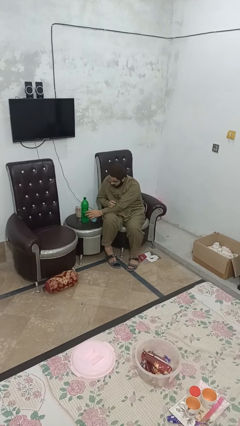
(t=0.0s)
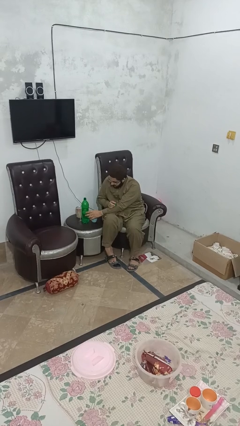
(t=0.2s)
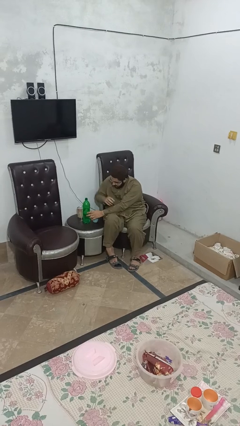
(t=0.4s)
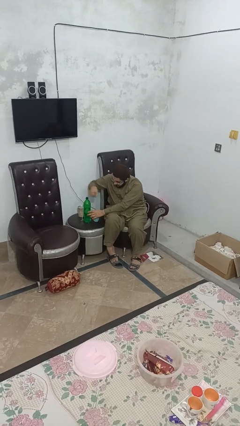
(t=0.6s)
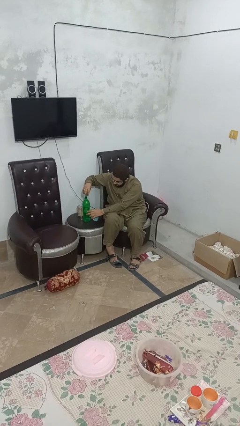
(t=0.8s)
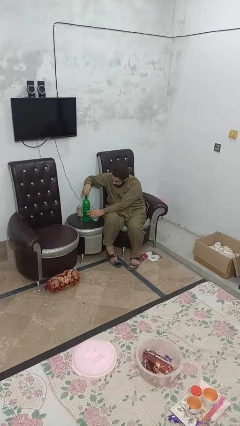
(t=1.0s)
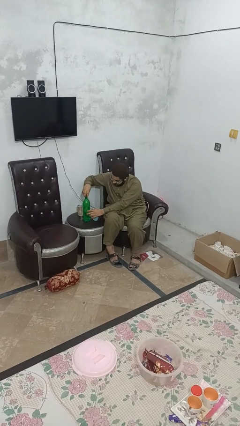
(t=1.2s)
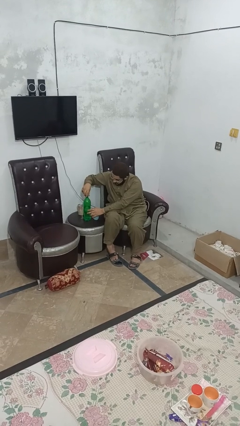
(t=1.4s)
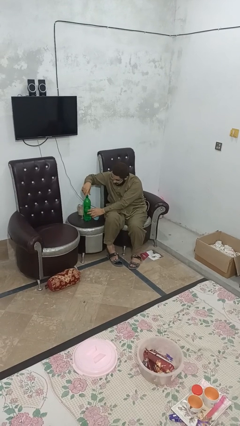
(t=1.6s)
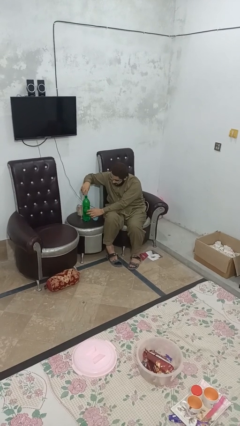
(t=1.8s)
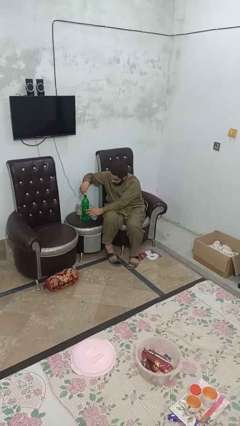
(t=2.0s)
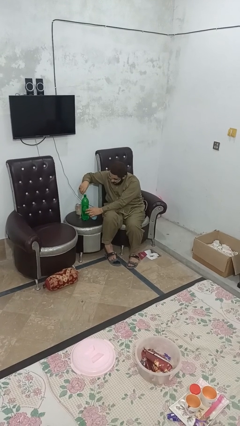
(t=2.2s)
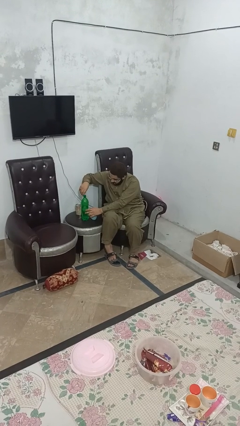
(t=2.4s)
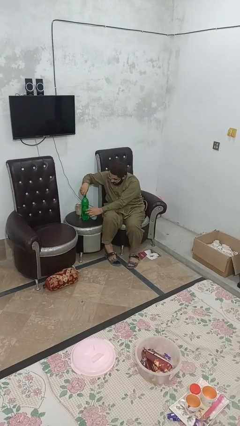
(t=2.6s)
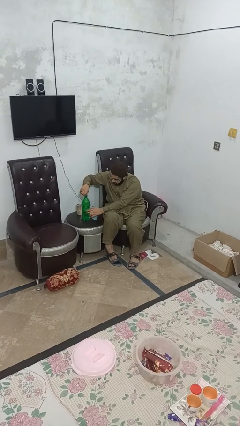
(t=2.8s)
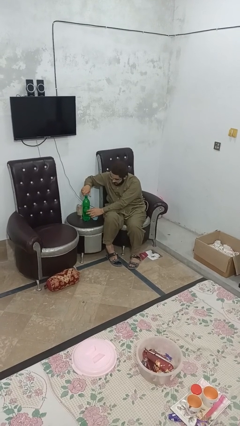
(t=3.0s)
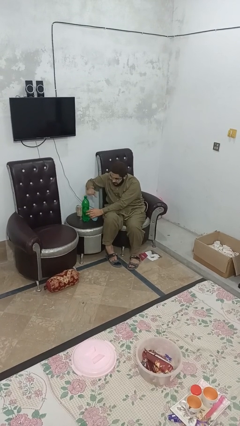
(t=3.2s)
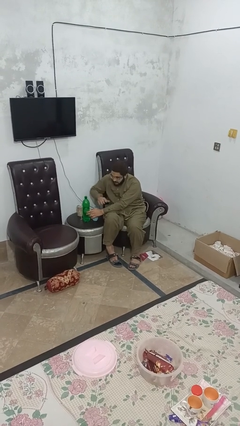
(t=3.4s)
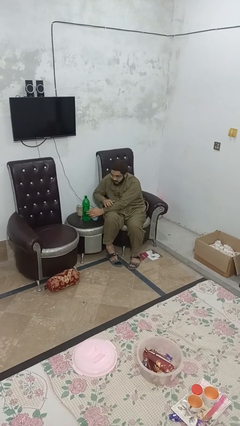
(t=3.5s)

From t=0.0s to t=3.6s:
person screws lid to bottle

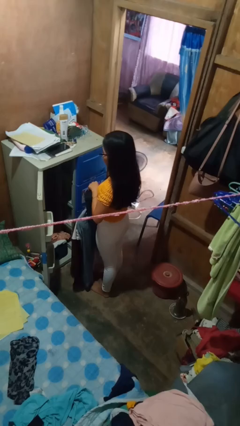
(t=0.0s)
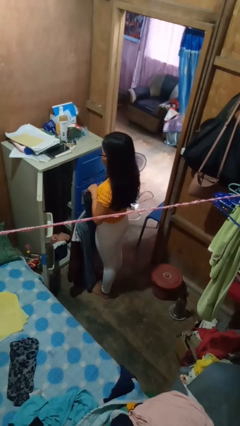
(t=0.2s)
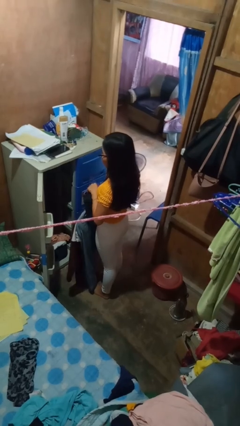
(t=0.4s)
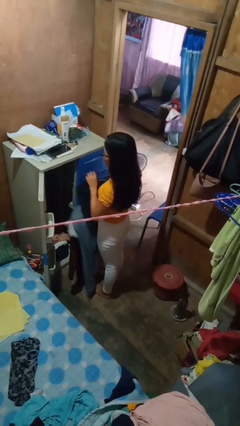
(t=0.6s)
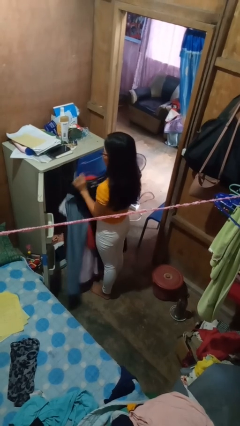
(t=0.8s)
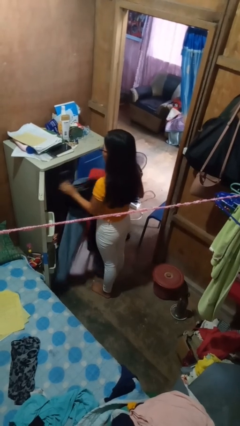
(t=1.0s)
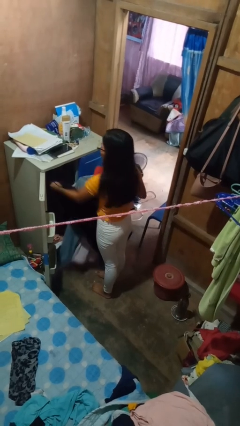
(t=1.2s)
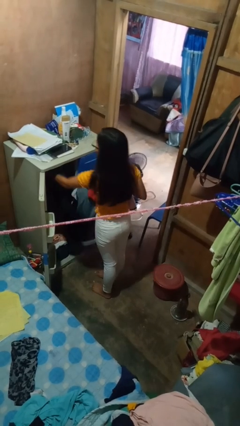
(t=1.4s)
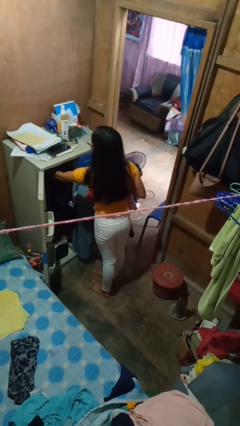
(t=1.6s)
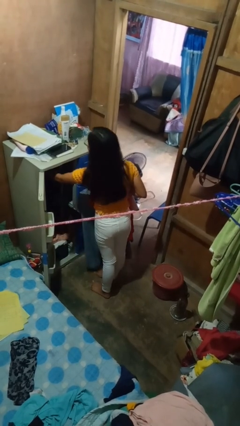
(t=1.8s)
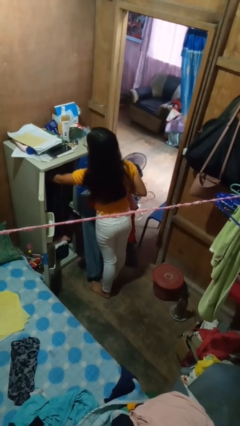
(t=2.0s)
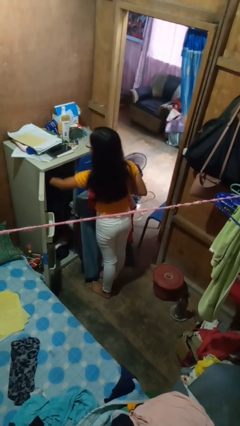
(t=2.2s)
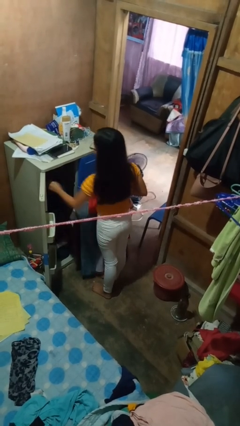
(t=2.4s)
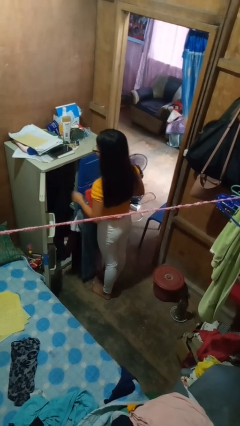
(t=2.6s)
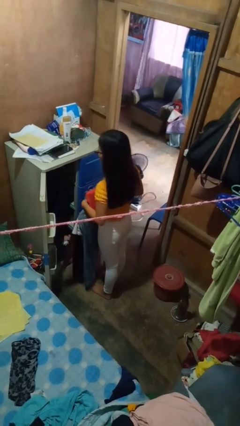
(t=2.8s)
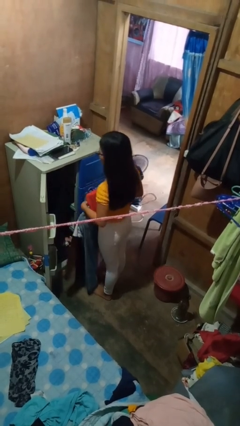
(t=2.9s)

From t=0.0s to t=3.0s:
person puts clothes into closet

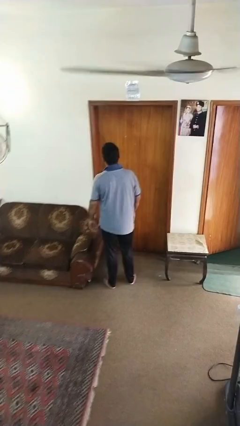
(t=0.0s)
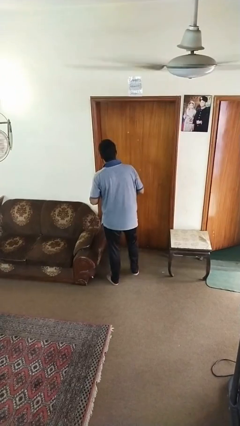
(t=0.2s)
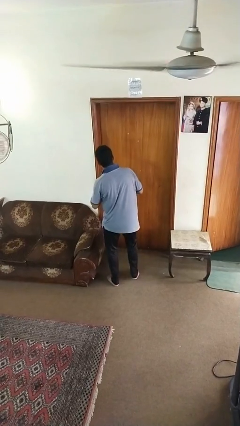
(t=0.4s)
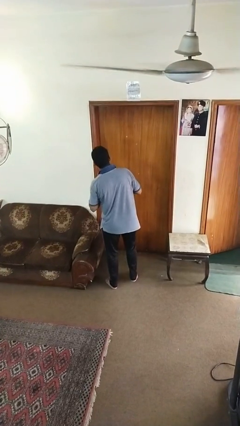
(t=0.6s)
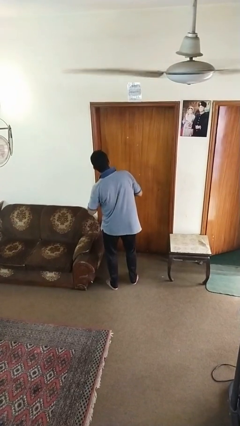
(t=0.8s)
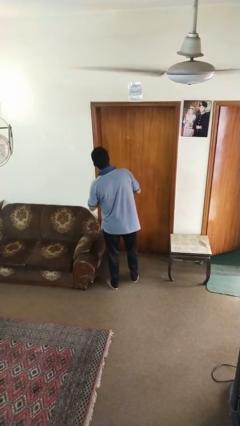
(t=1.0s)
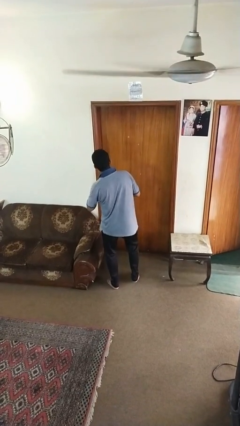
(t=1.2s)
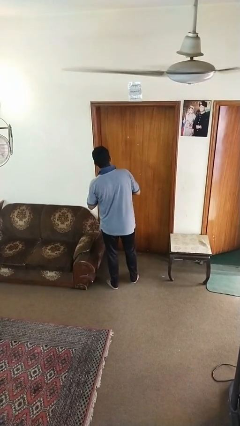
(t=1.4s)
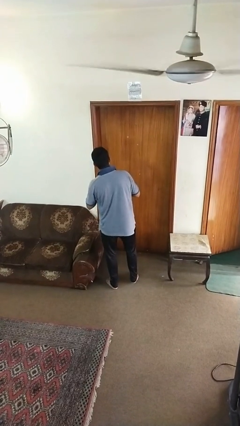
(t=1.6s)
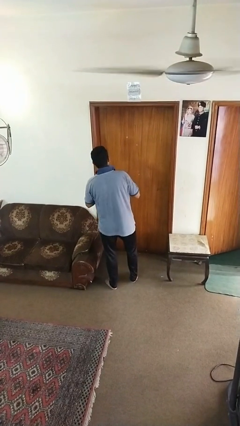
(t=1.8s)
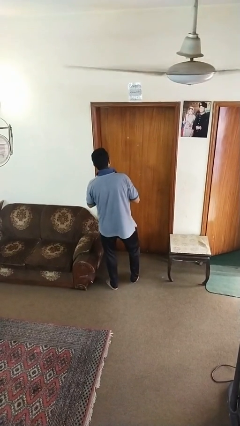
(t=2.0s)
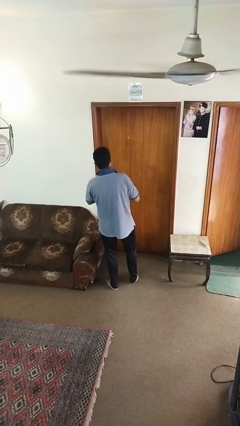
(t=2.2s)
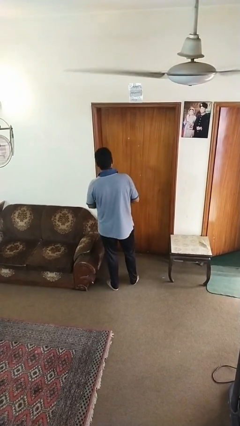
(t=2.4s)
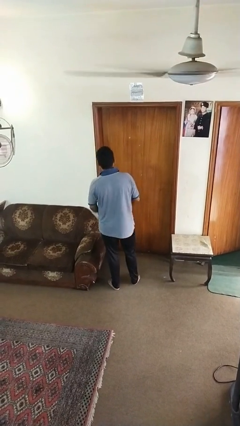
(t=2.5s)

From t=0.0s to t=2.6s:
person dances in place

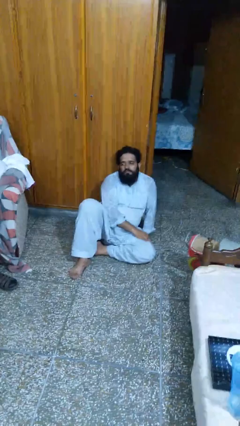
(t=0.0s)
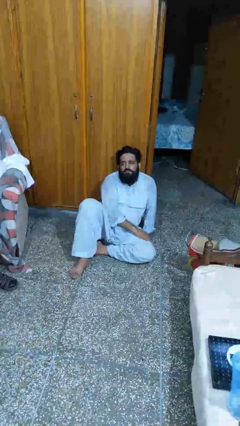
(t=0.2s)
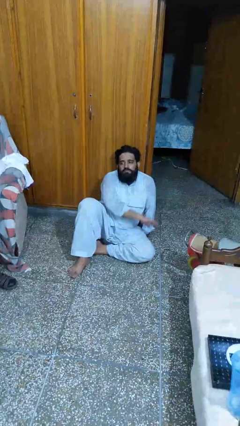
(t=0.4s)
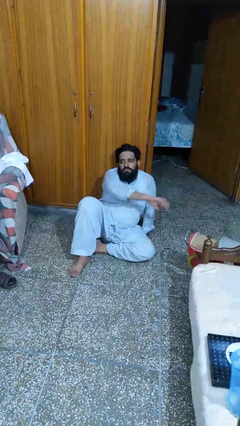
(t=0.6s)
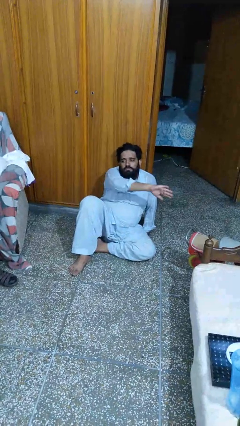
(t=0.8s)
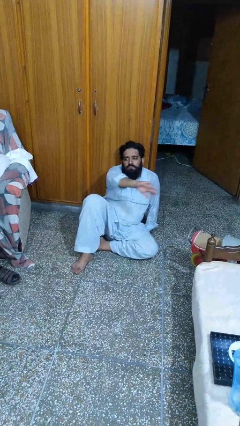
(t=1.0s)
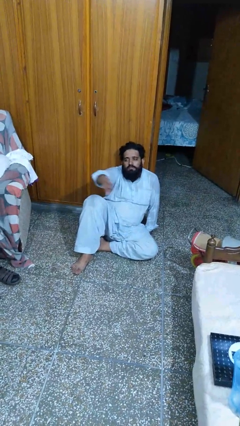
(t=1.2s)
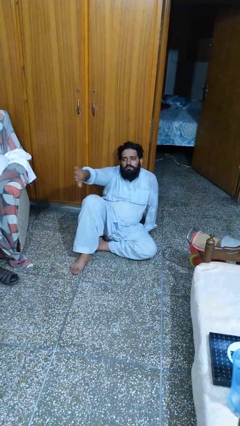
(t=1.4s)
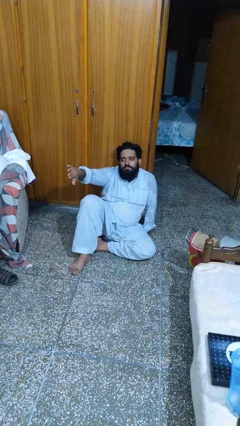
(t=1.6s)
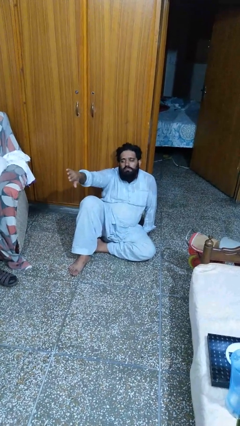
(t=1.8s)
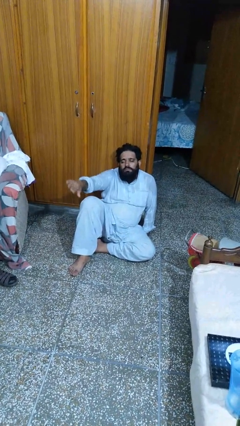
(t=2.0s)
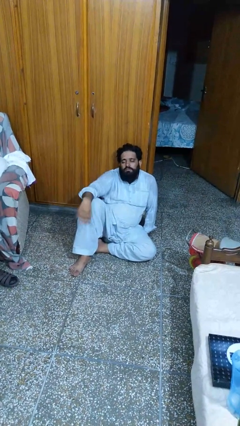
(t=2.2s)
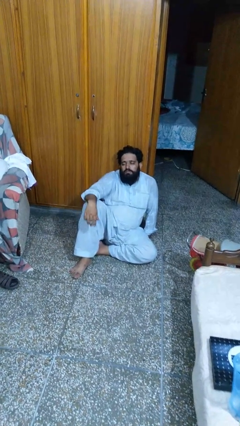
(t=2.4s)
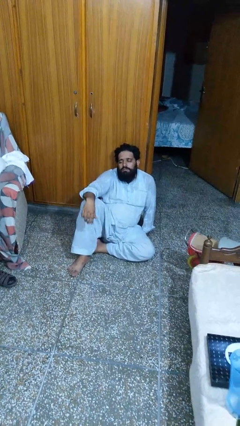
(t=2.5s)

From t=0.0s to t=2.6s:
person gestures swipe right

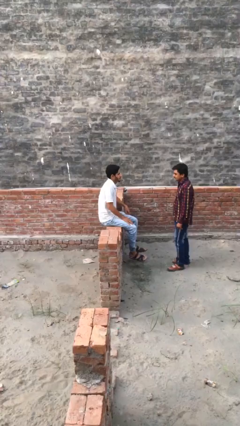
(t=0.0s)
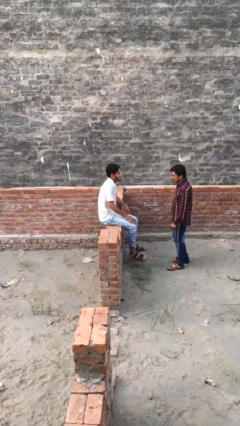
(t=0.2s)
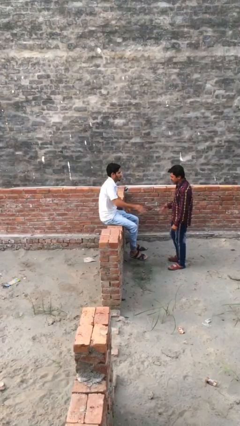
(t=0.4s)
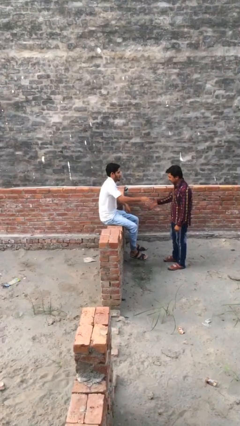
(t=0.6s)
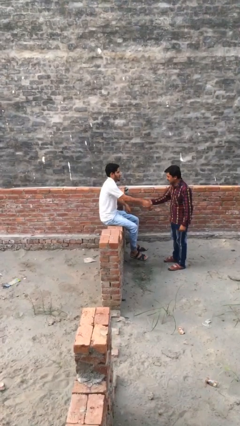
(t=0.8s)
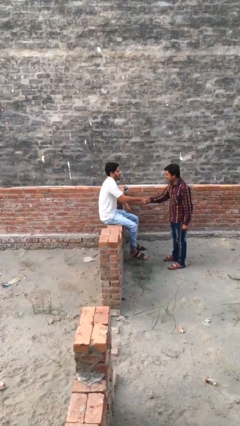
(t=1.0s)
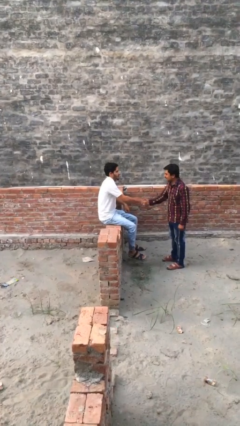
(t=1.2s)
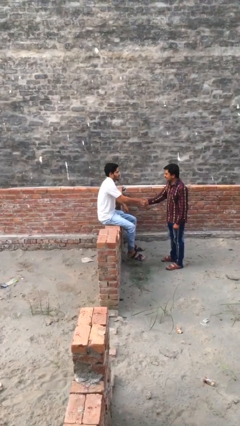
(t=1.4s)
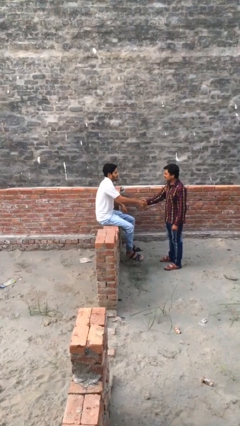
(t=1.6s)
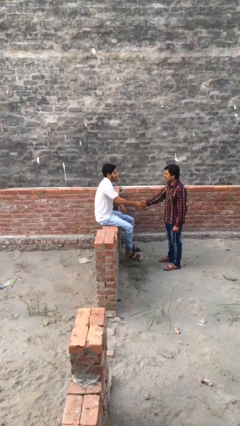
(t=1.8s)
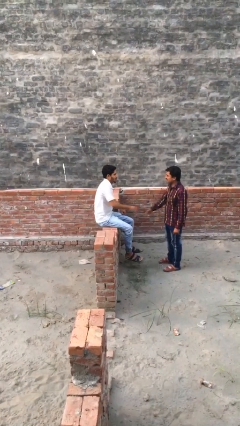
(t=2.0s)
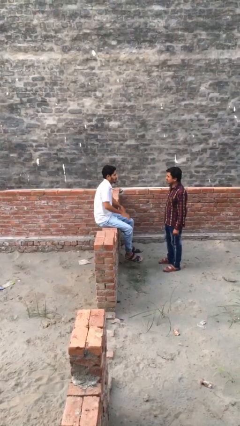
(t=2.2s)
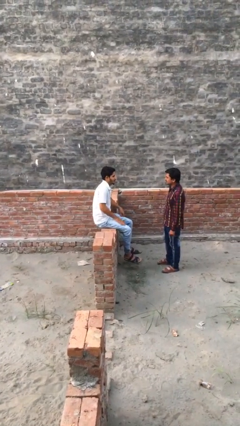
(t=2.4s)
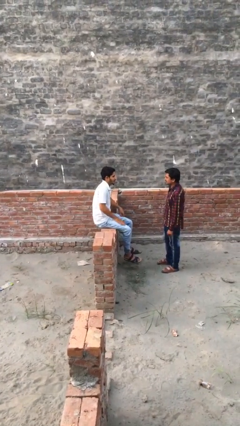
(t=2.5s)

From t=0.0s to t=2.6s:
person shakes hand

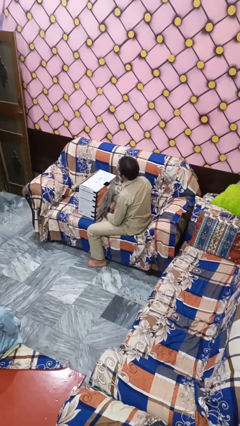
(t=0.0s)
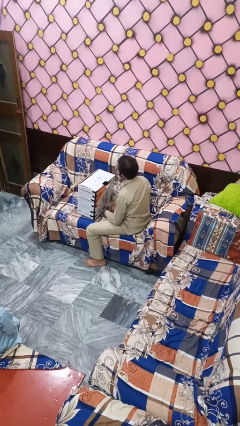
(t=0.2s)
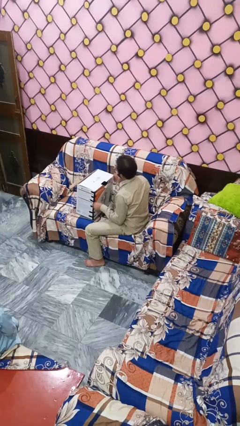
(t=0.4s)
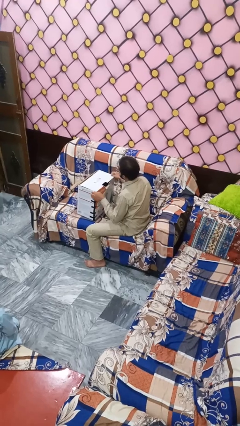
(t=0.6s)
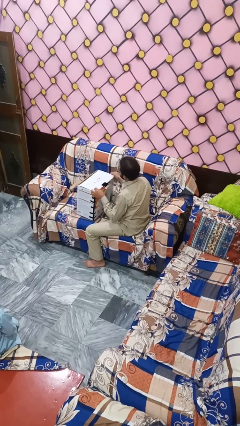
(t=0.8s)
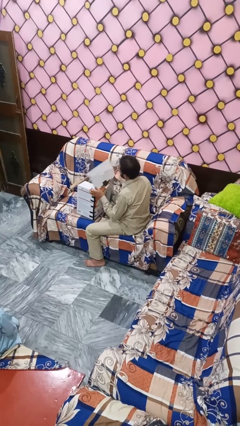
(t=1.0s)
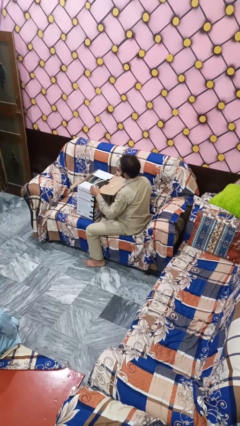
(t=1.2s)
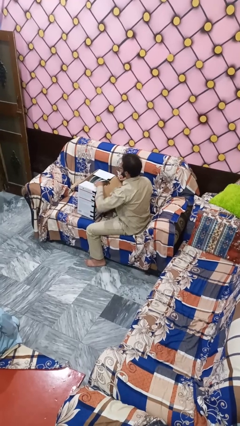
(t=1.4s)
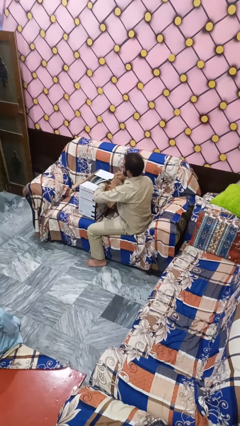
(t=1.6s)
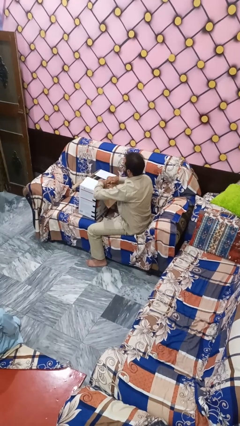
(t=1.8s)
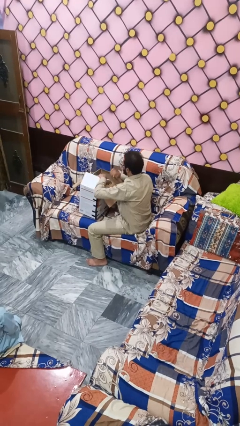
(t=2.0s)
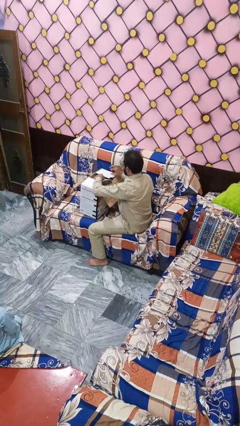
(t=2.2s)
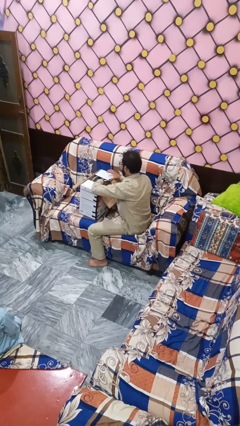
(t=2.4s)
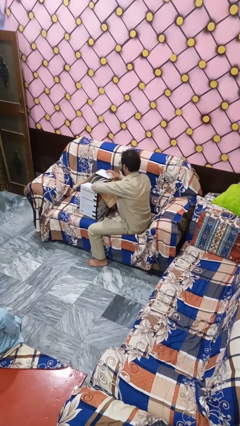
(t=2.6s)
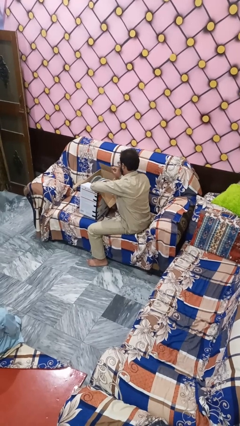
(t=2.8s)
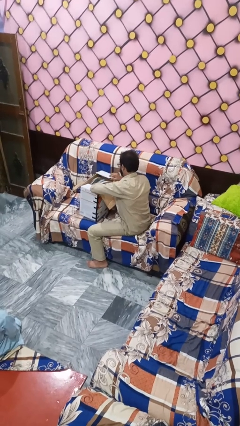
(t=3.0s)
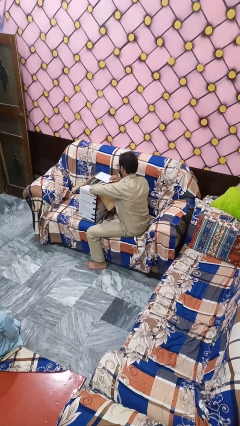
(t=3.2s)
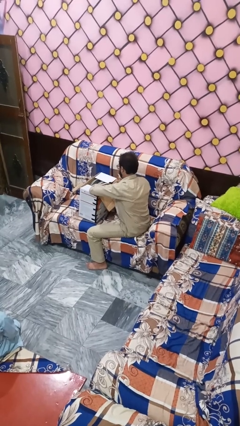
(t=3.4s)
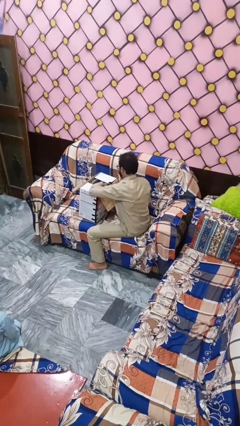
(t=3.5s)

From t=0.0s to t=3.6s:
person searches in box
